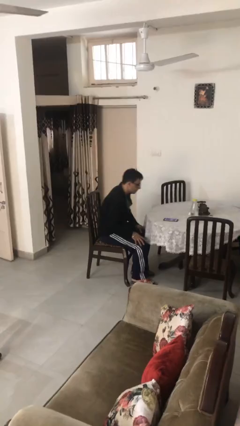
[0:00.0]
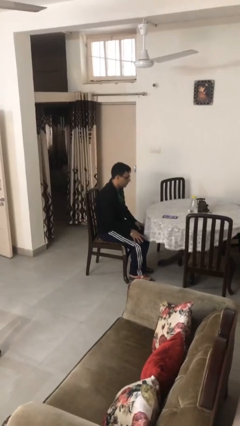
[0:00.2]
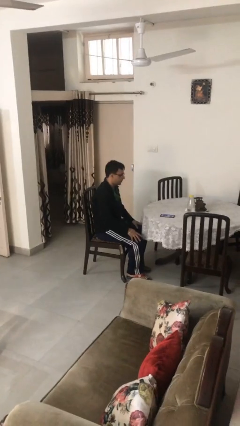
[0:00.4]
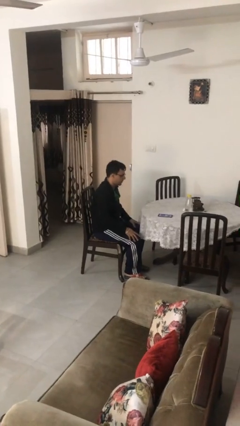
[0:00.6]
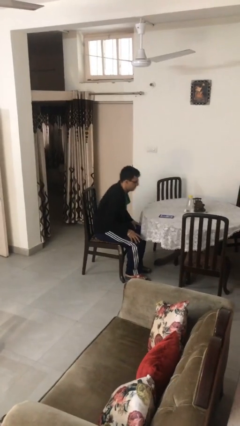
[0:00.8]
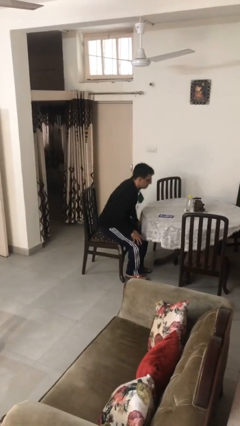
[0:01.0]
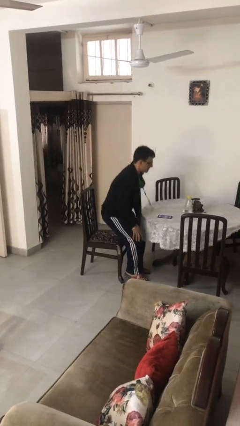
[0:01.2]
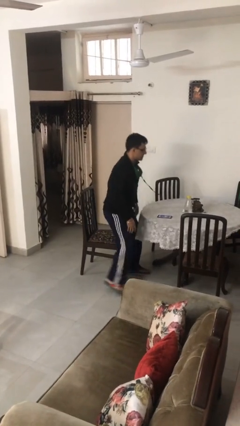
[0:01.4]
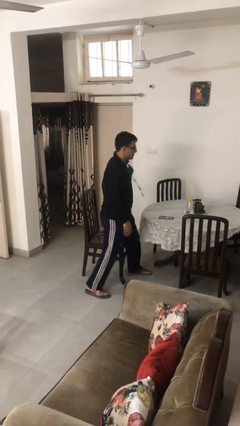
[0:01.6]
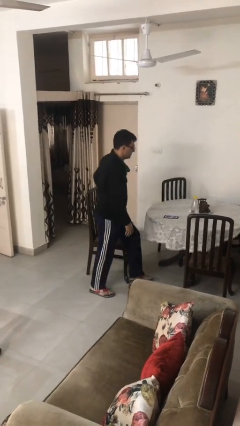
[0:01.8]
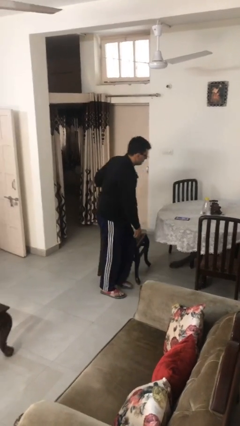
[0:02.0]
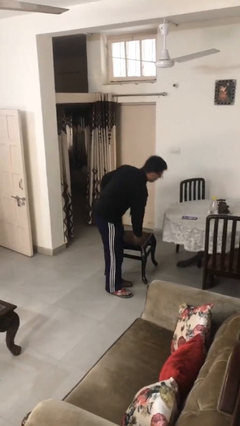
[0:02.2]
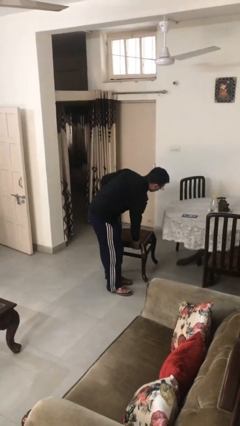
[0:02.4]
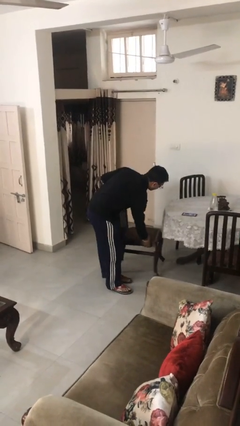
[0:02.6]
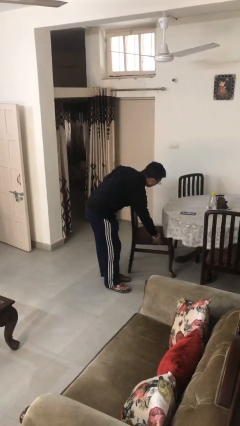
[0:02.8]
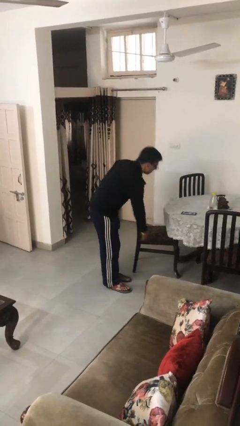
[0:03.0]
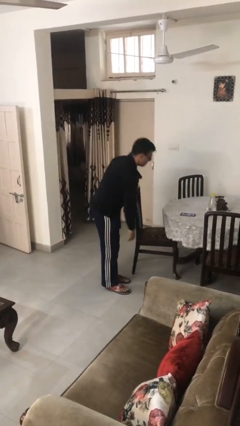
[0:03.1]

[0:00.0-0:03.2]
person stands up

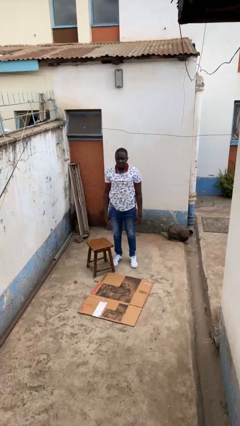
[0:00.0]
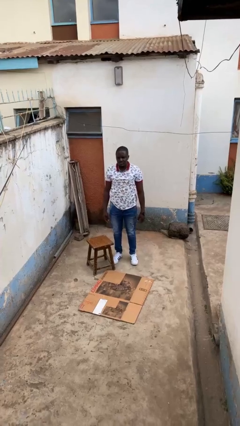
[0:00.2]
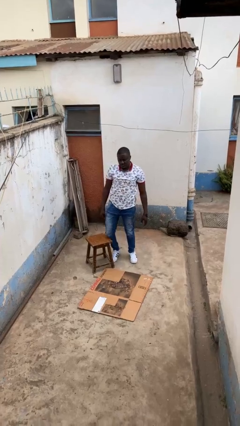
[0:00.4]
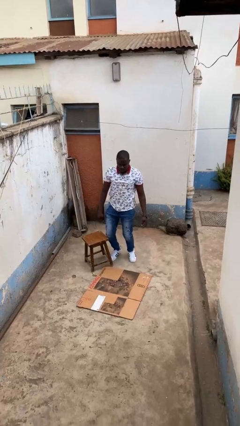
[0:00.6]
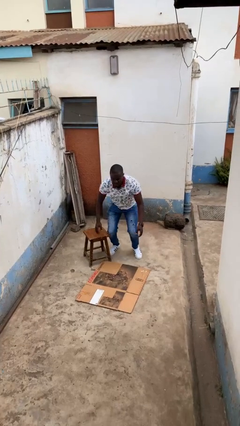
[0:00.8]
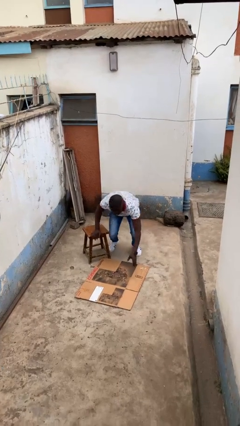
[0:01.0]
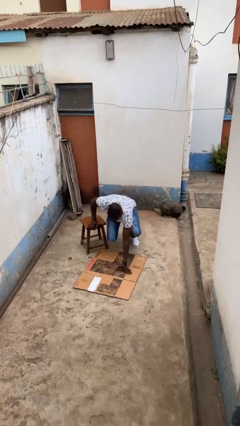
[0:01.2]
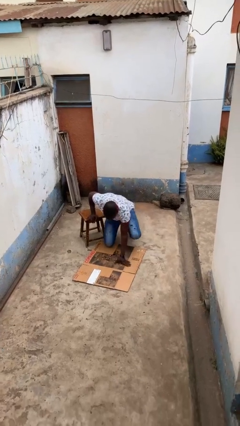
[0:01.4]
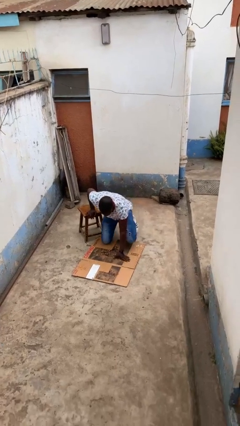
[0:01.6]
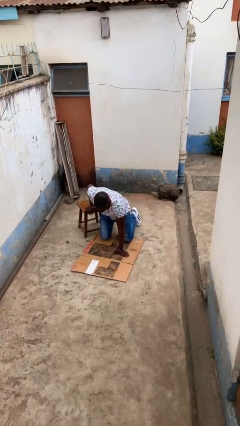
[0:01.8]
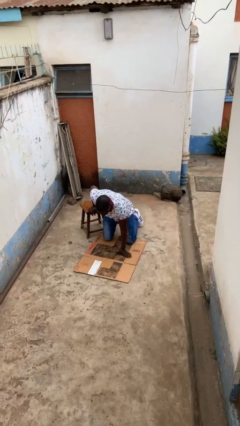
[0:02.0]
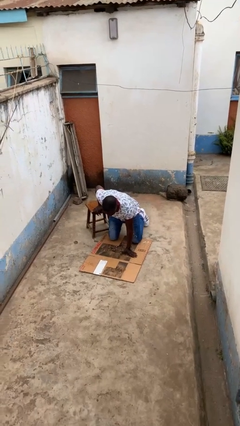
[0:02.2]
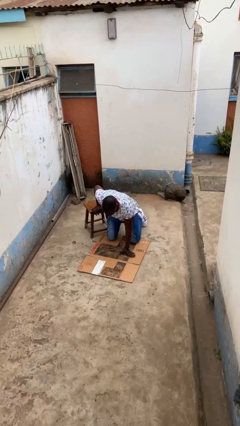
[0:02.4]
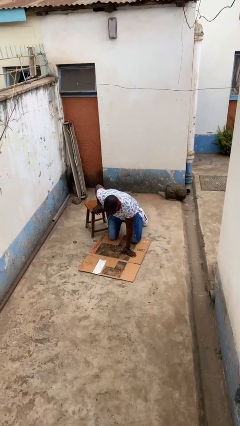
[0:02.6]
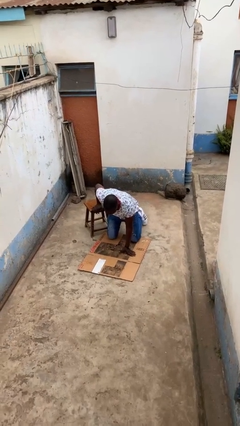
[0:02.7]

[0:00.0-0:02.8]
person trips on object on floor

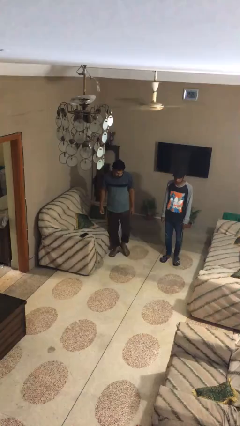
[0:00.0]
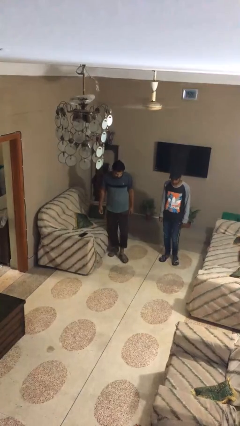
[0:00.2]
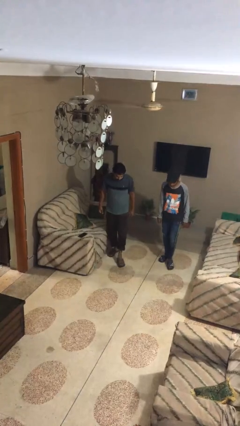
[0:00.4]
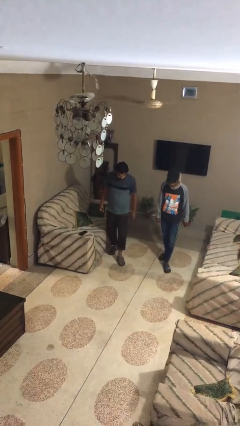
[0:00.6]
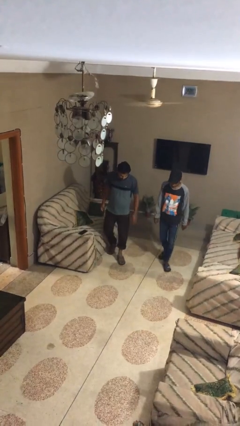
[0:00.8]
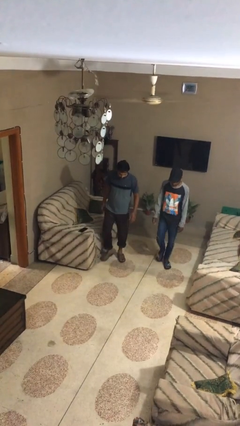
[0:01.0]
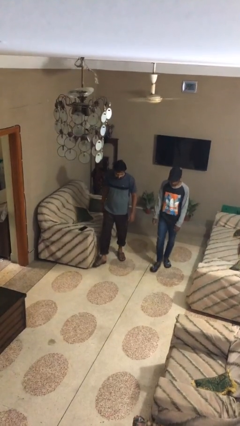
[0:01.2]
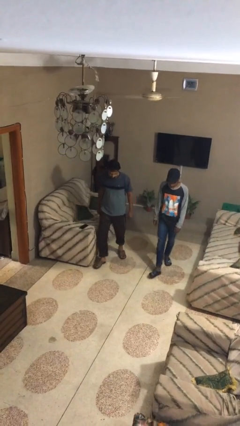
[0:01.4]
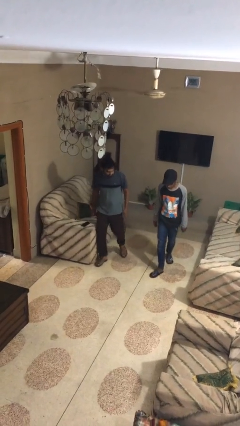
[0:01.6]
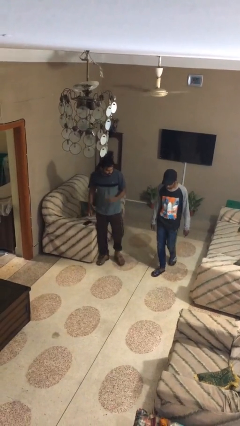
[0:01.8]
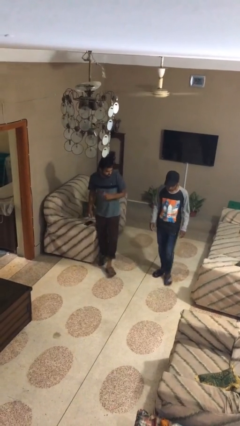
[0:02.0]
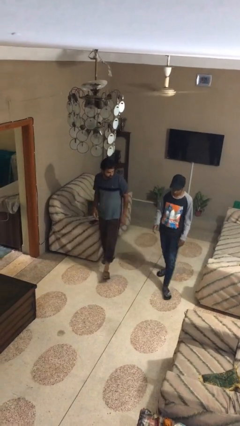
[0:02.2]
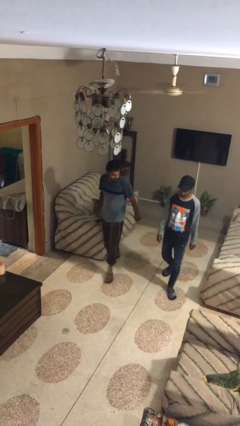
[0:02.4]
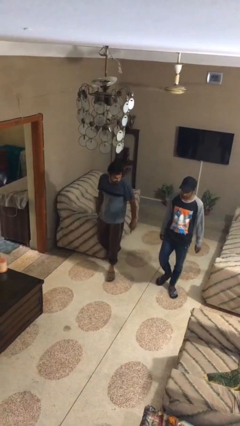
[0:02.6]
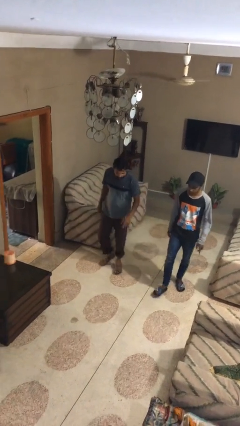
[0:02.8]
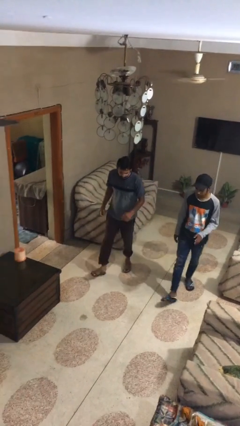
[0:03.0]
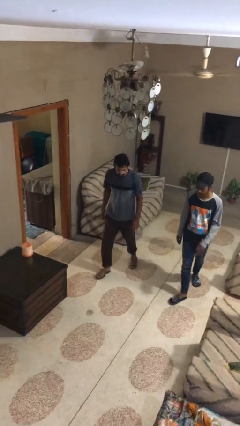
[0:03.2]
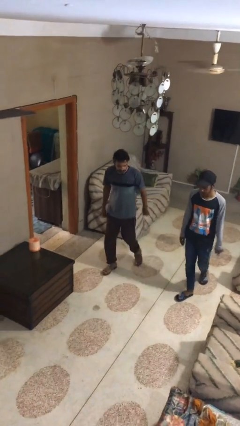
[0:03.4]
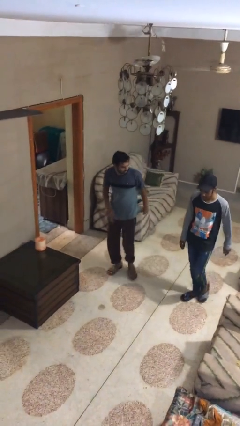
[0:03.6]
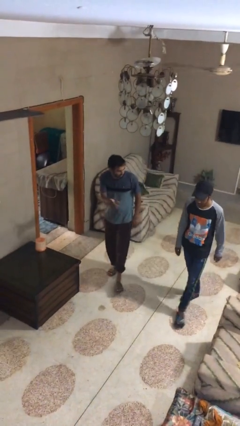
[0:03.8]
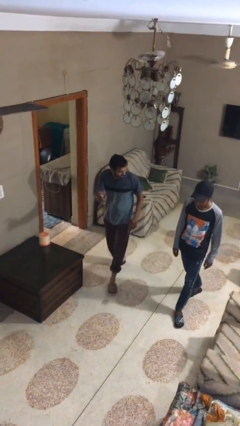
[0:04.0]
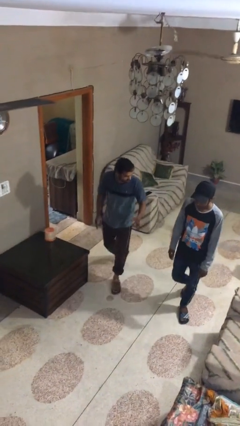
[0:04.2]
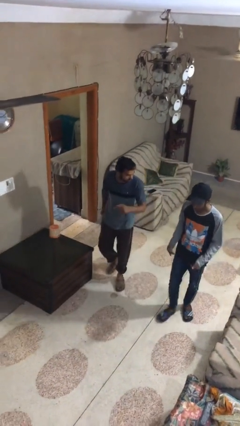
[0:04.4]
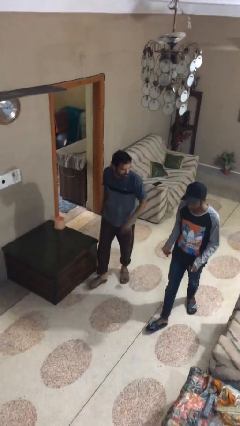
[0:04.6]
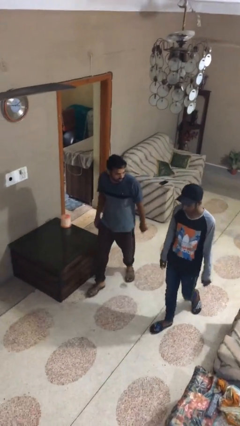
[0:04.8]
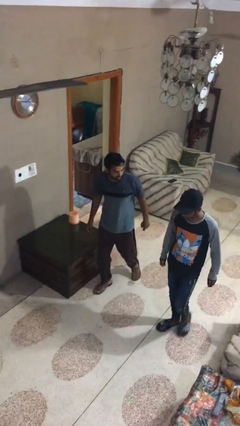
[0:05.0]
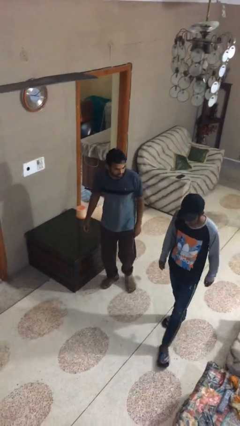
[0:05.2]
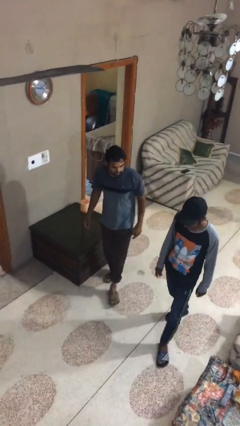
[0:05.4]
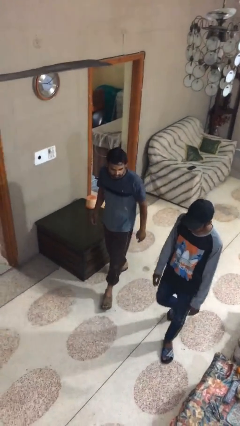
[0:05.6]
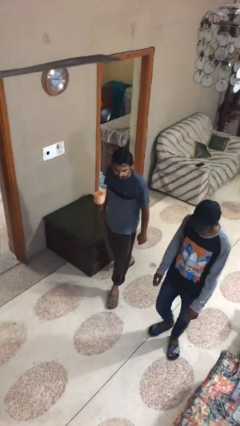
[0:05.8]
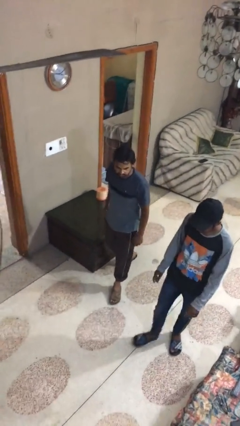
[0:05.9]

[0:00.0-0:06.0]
person talks to person

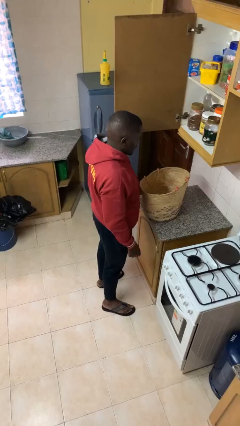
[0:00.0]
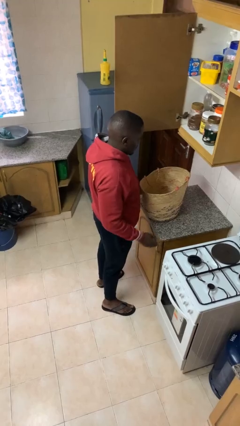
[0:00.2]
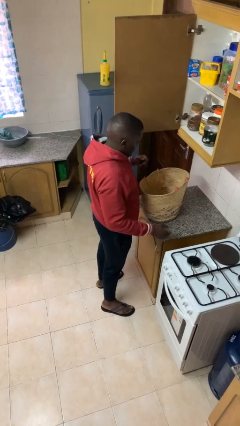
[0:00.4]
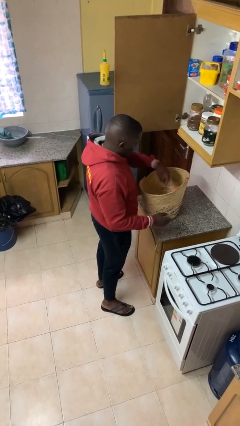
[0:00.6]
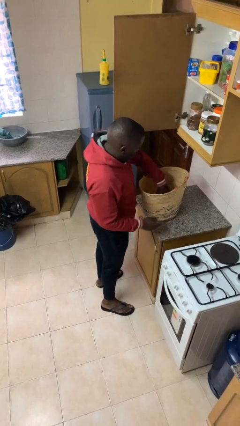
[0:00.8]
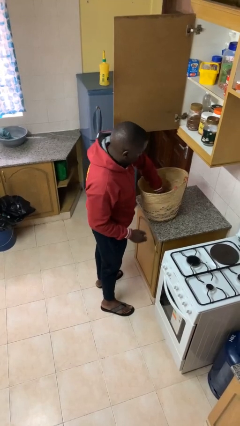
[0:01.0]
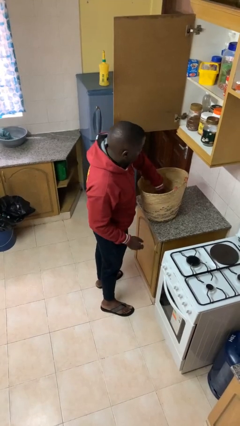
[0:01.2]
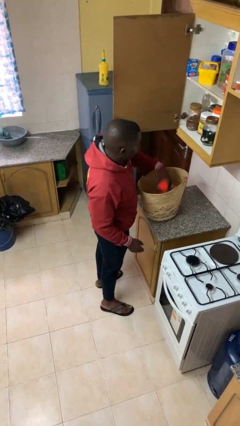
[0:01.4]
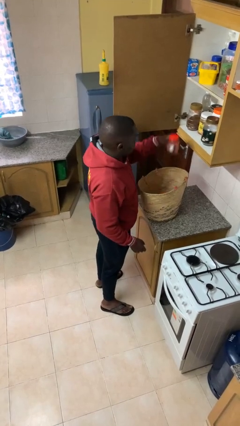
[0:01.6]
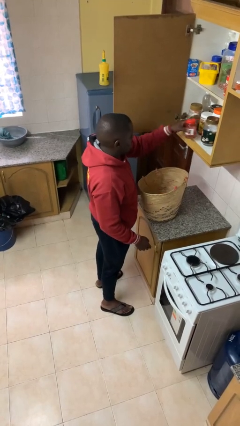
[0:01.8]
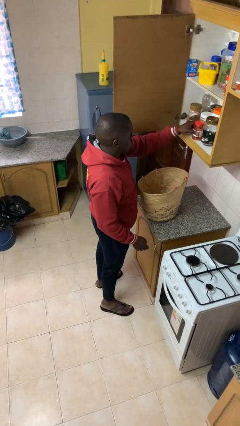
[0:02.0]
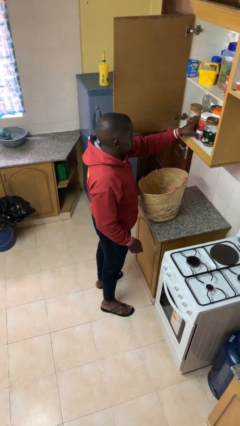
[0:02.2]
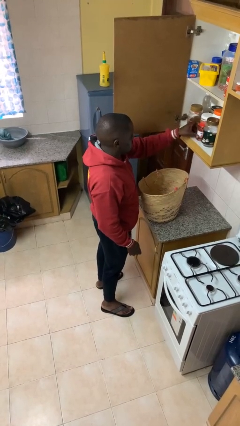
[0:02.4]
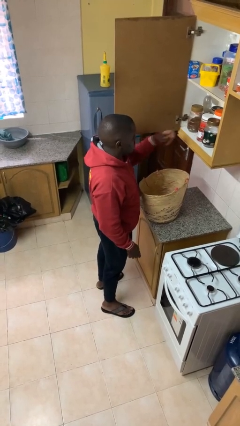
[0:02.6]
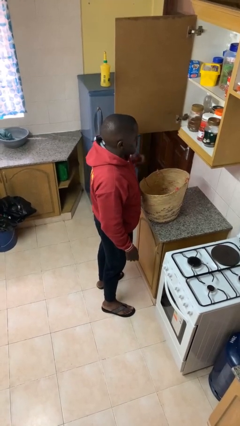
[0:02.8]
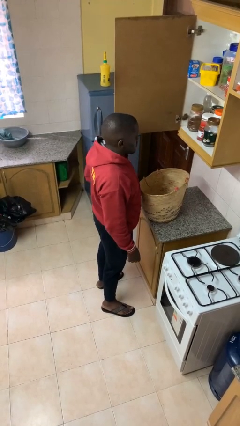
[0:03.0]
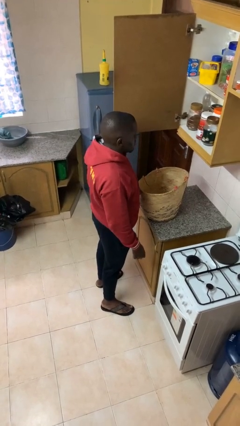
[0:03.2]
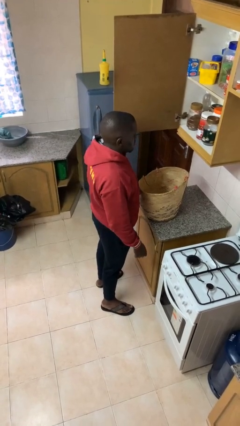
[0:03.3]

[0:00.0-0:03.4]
person loads groceries into cabinet

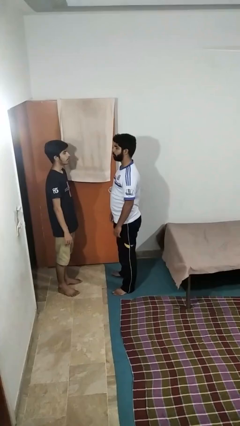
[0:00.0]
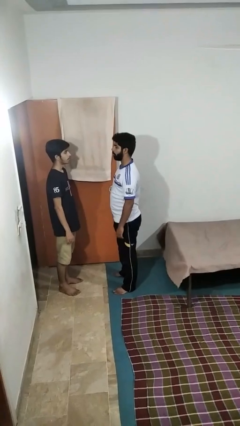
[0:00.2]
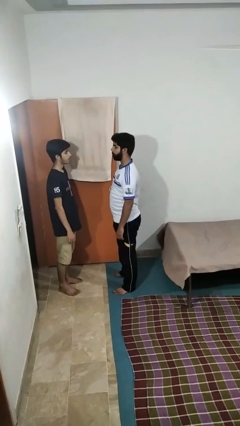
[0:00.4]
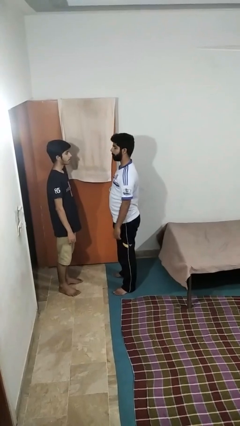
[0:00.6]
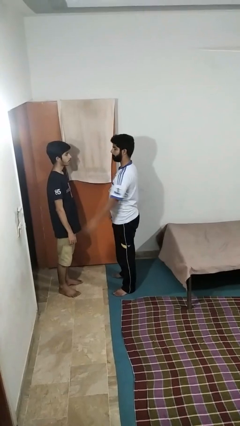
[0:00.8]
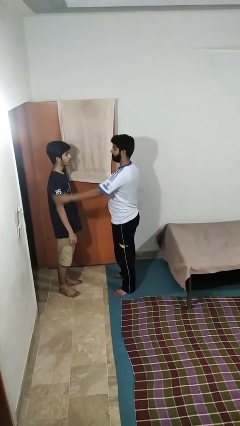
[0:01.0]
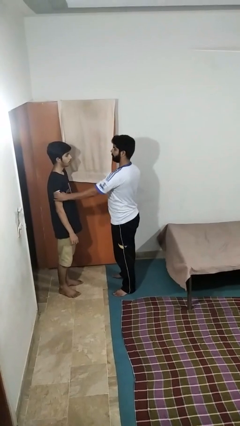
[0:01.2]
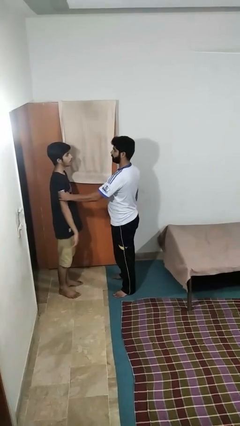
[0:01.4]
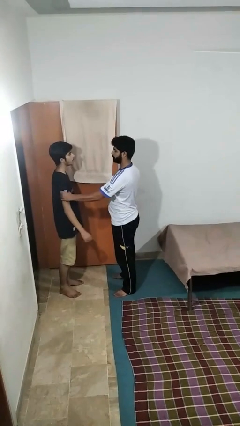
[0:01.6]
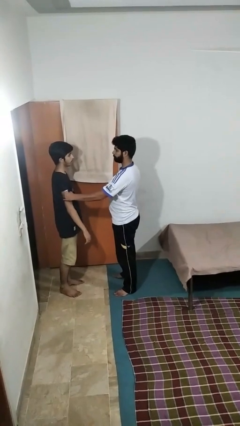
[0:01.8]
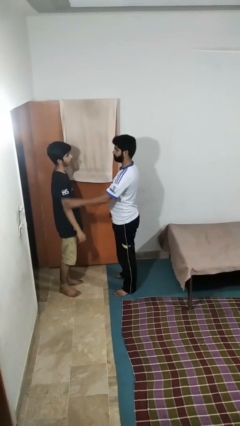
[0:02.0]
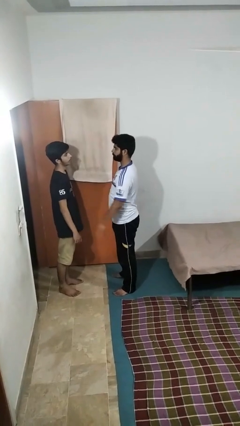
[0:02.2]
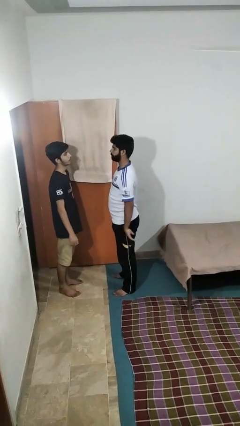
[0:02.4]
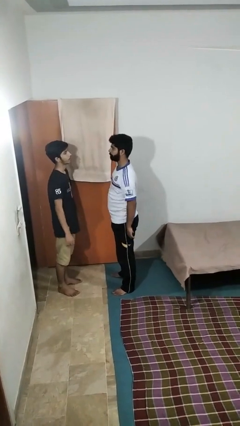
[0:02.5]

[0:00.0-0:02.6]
person grabs person by bicep
